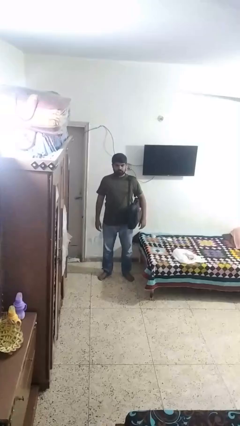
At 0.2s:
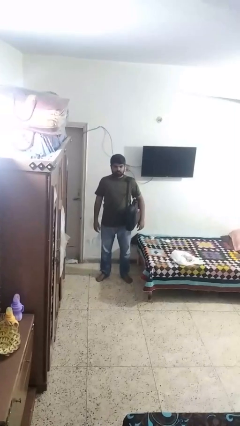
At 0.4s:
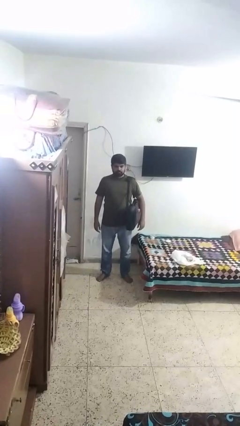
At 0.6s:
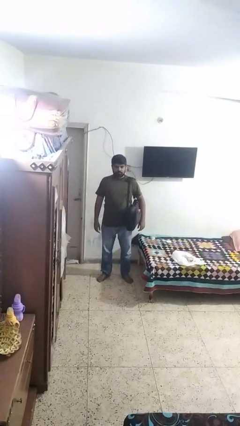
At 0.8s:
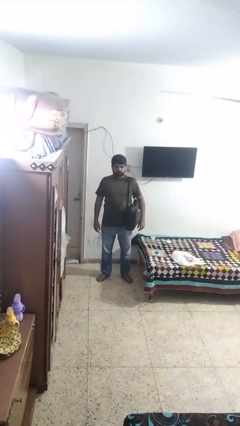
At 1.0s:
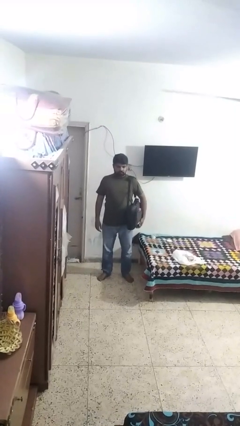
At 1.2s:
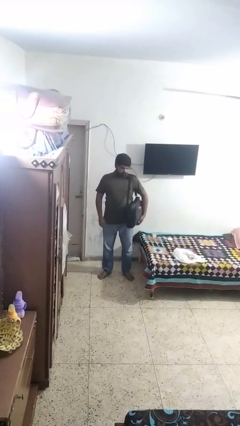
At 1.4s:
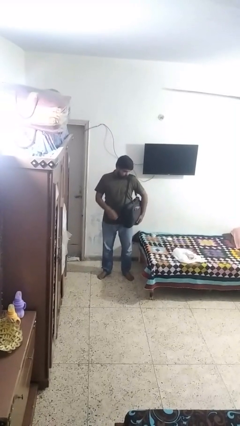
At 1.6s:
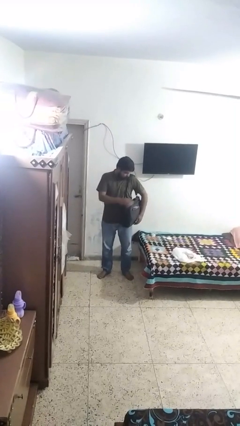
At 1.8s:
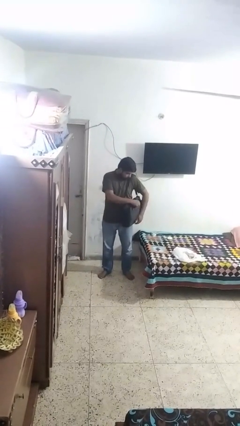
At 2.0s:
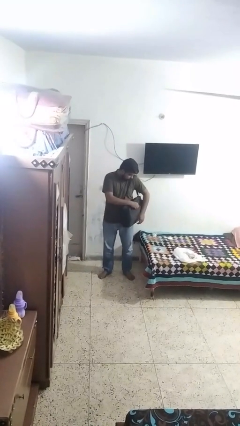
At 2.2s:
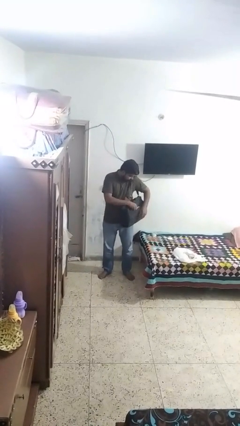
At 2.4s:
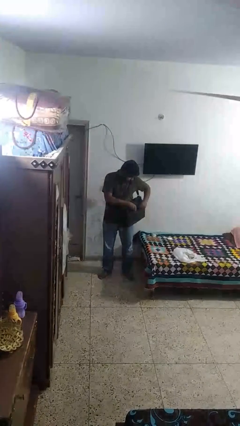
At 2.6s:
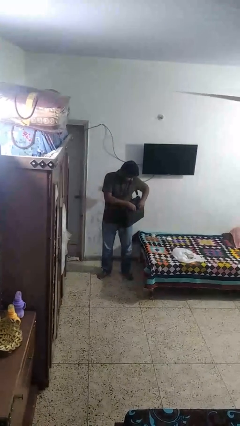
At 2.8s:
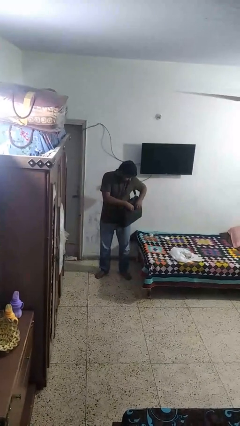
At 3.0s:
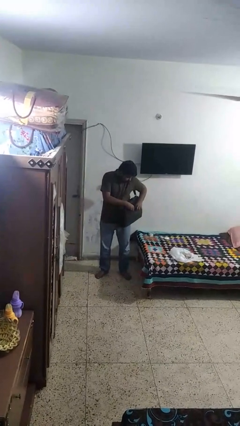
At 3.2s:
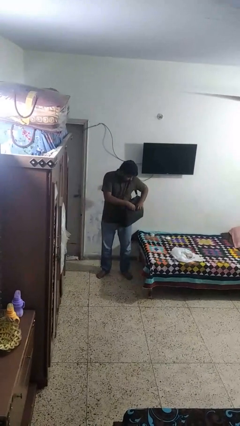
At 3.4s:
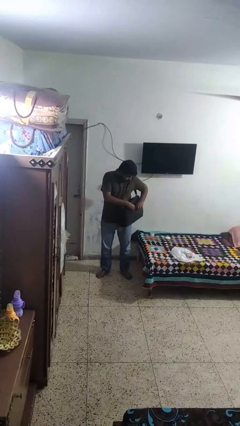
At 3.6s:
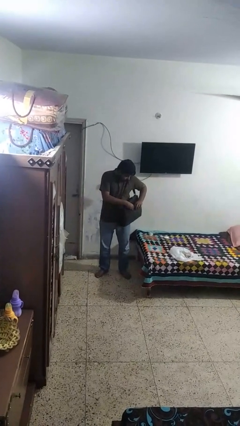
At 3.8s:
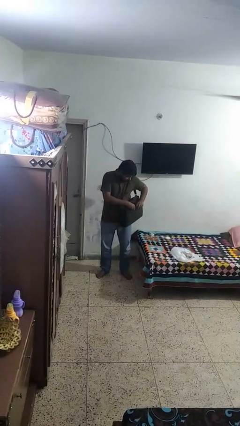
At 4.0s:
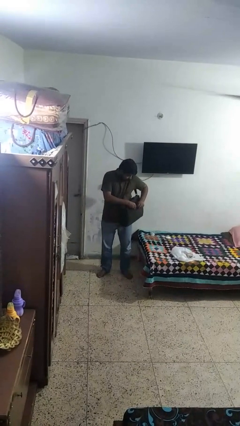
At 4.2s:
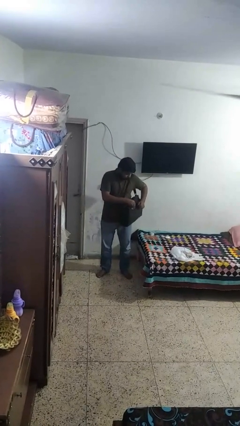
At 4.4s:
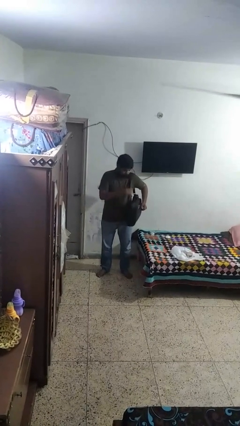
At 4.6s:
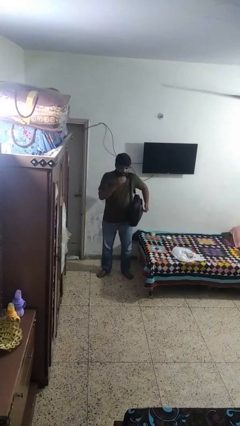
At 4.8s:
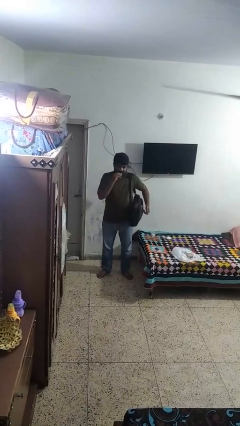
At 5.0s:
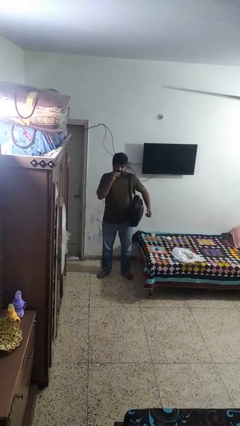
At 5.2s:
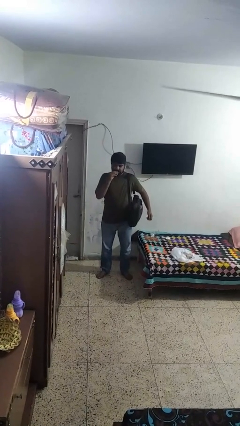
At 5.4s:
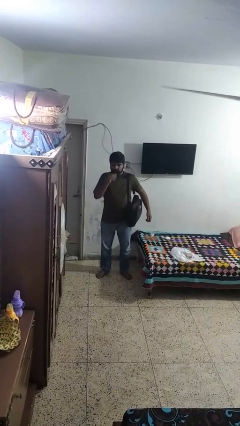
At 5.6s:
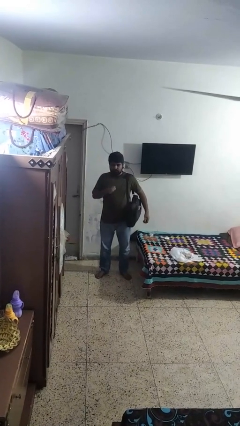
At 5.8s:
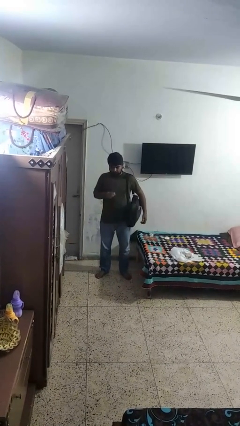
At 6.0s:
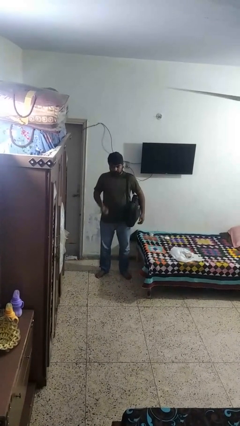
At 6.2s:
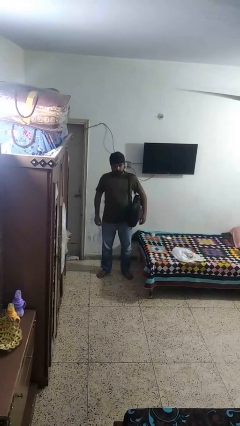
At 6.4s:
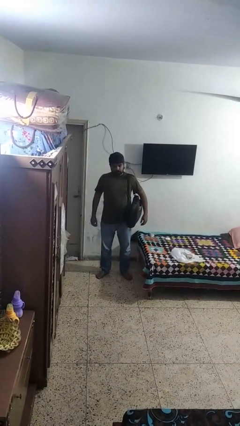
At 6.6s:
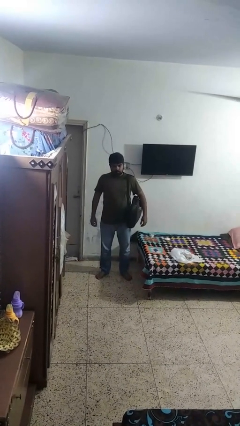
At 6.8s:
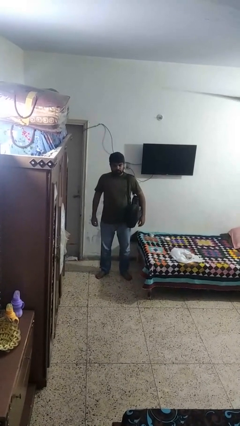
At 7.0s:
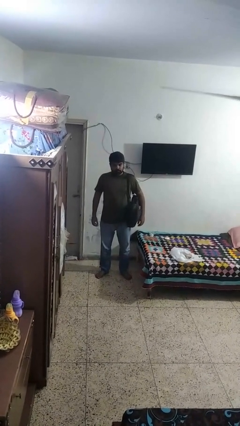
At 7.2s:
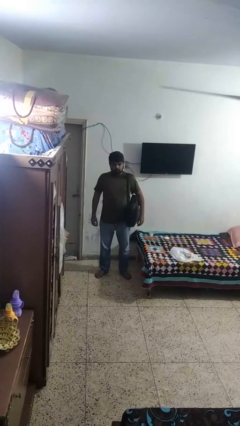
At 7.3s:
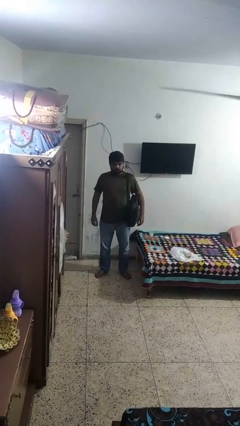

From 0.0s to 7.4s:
person eats snack from bag

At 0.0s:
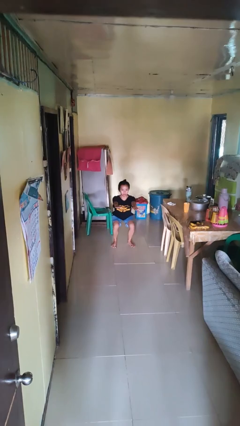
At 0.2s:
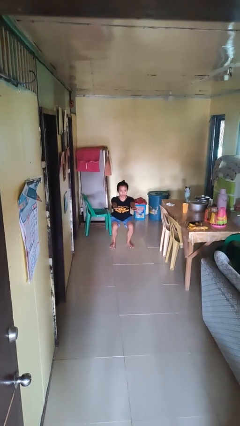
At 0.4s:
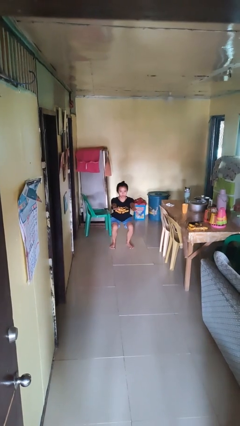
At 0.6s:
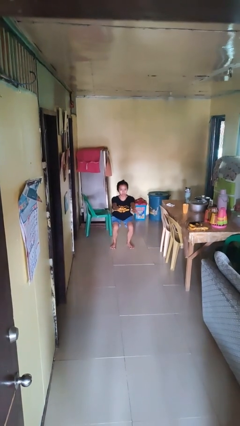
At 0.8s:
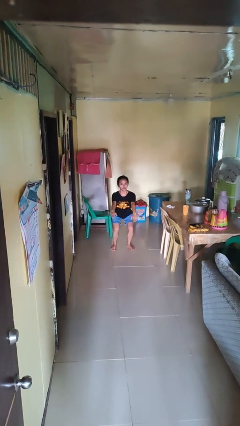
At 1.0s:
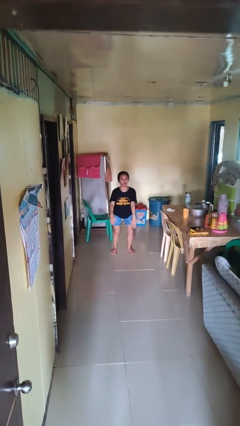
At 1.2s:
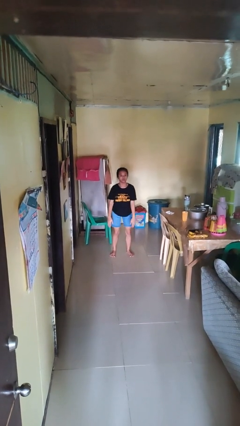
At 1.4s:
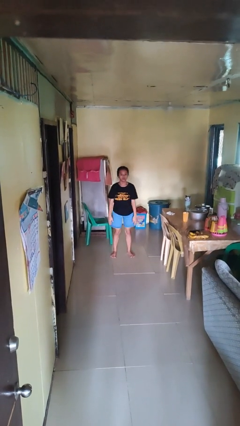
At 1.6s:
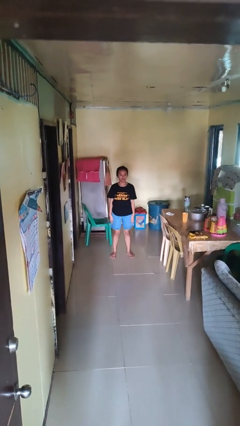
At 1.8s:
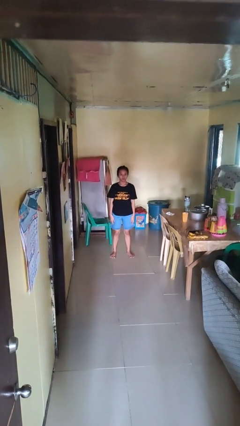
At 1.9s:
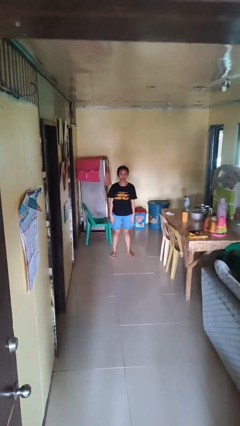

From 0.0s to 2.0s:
person stands up

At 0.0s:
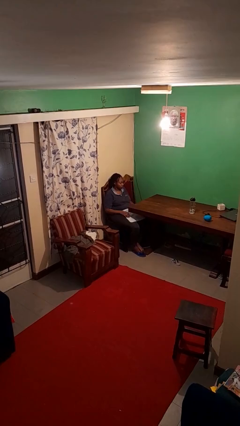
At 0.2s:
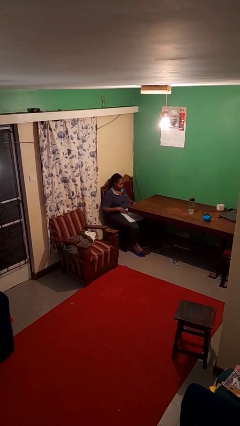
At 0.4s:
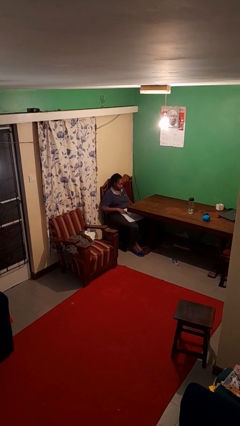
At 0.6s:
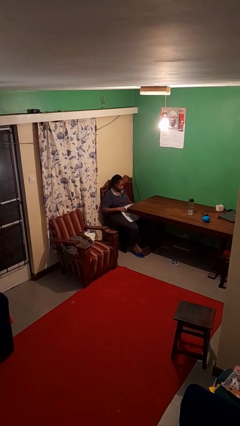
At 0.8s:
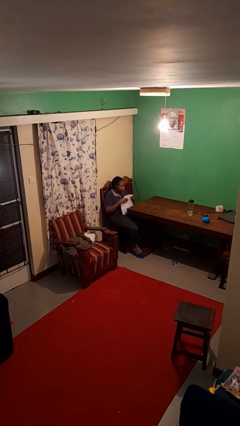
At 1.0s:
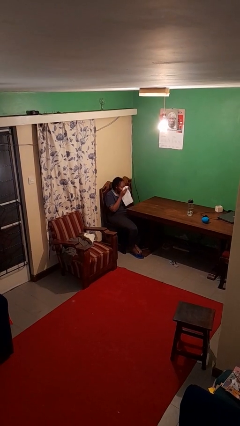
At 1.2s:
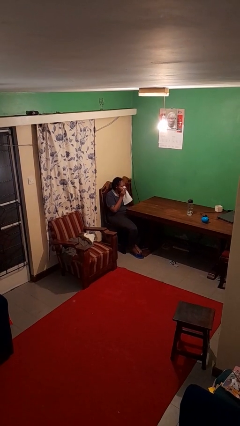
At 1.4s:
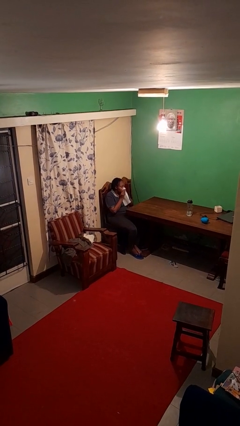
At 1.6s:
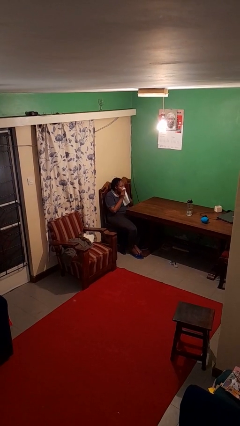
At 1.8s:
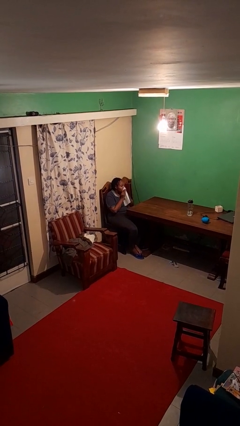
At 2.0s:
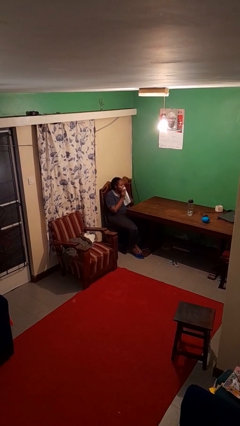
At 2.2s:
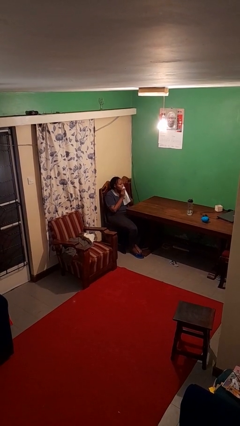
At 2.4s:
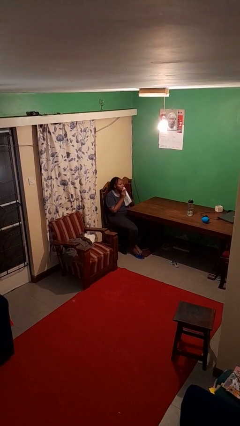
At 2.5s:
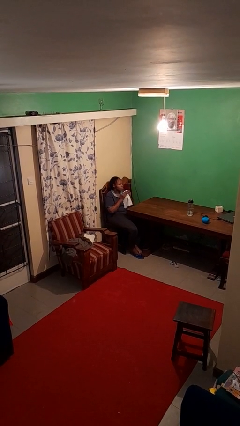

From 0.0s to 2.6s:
person wipes mouth with napkin

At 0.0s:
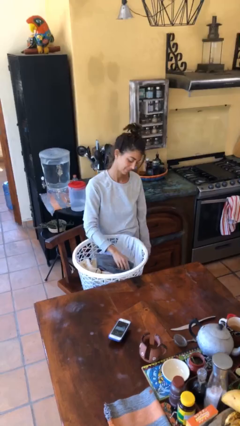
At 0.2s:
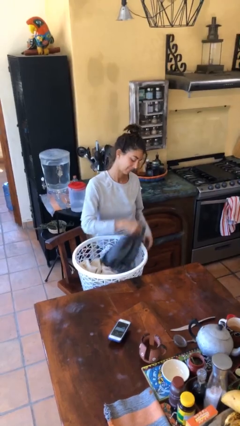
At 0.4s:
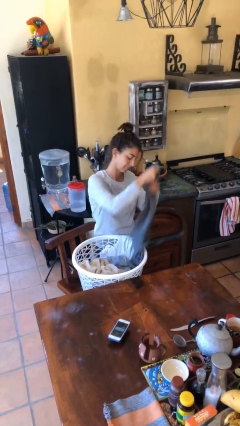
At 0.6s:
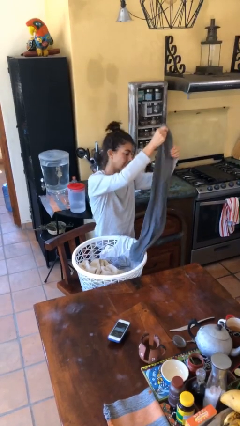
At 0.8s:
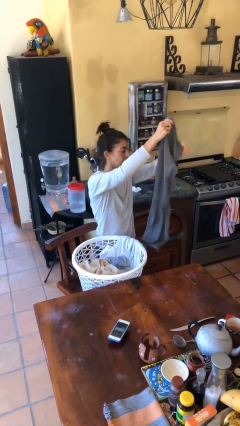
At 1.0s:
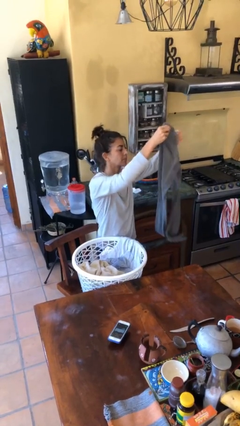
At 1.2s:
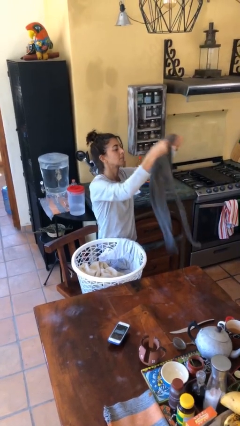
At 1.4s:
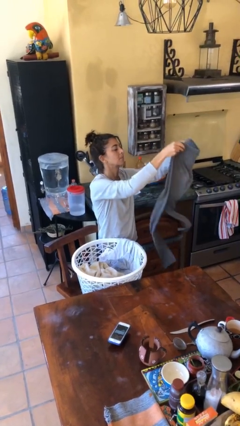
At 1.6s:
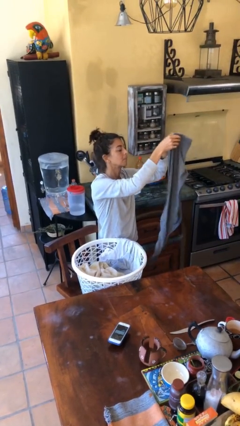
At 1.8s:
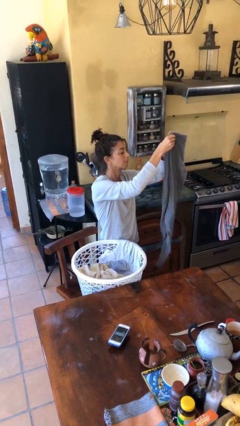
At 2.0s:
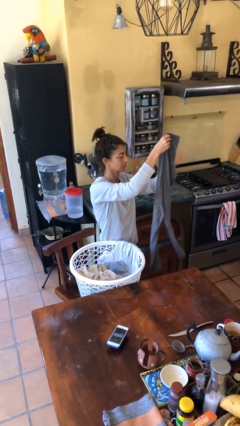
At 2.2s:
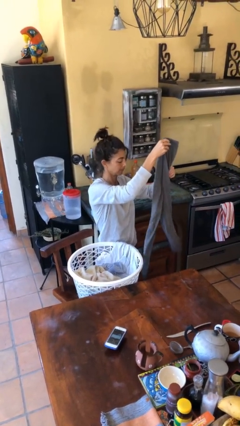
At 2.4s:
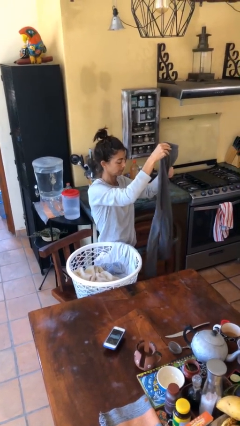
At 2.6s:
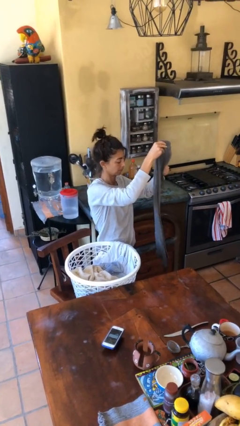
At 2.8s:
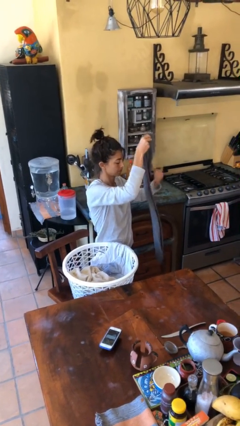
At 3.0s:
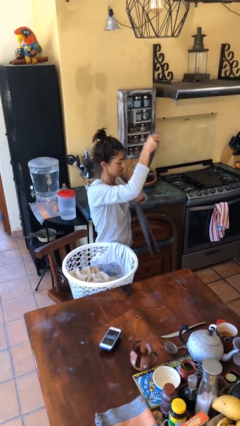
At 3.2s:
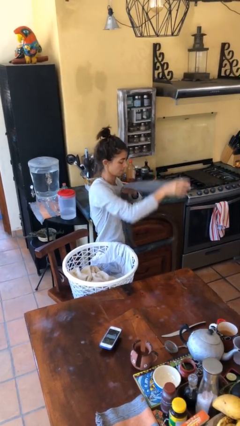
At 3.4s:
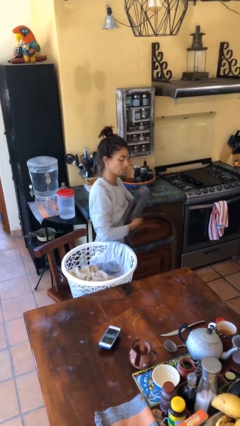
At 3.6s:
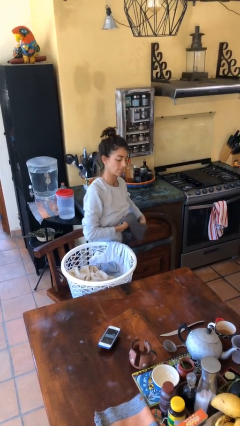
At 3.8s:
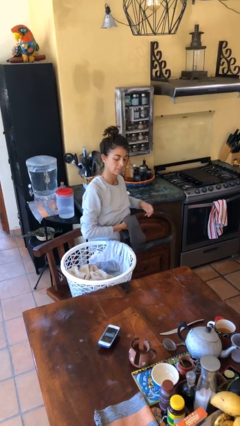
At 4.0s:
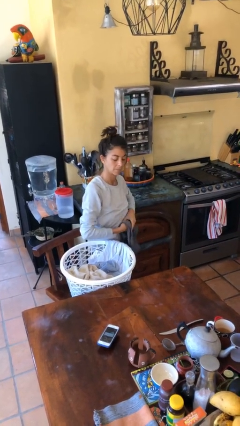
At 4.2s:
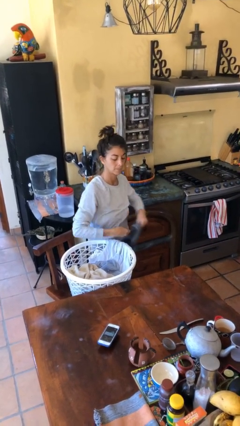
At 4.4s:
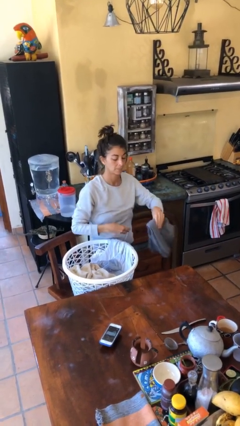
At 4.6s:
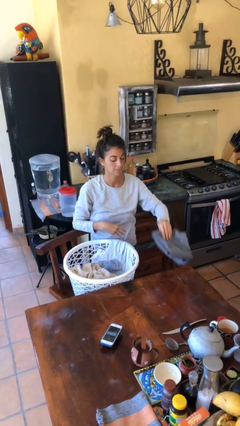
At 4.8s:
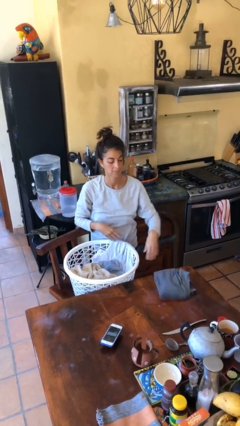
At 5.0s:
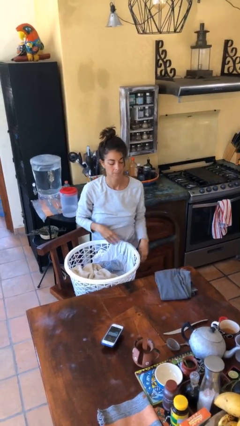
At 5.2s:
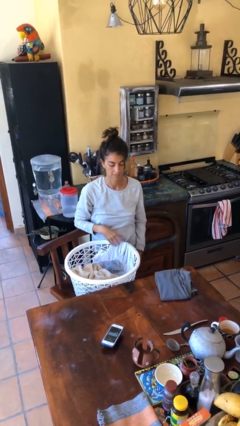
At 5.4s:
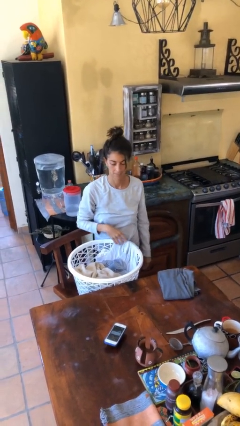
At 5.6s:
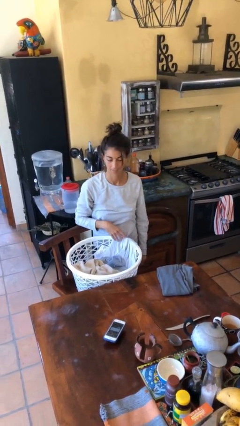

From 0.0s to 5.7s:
person folds pants
